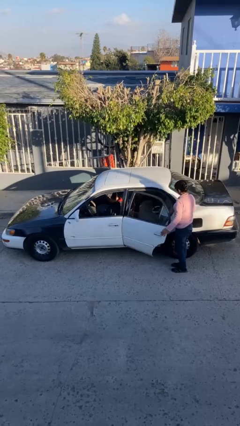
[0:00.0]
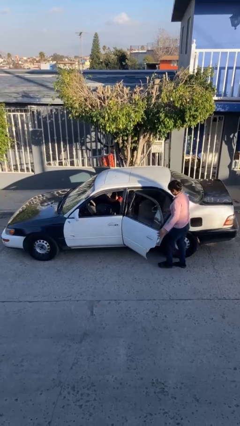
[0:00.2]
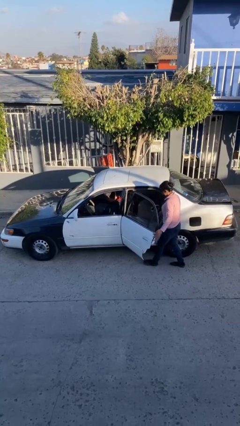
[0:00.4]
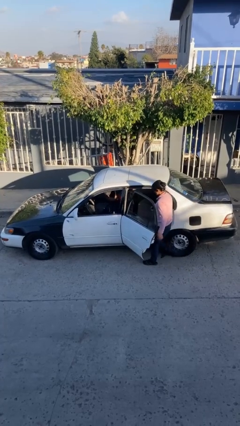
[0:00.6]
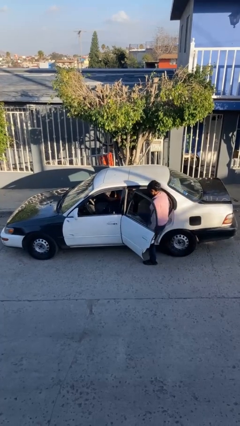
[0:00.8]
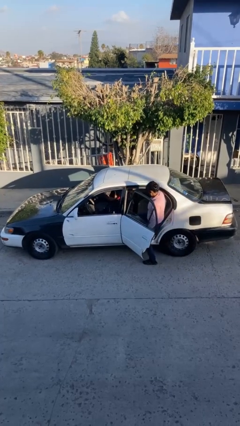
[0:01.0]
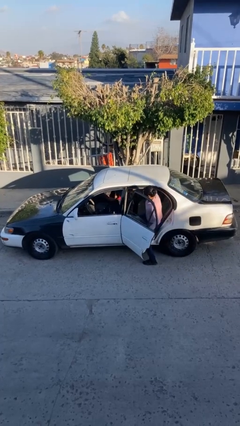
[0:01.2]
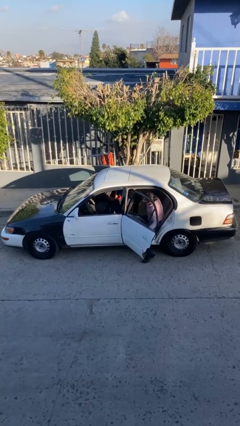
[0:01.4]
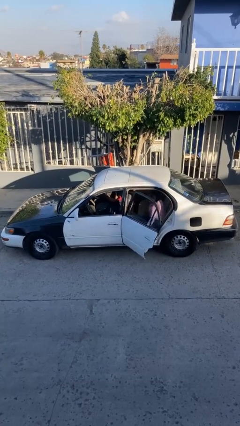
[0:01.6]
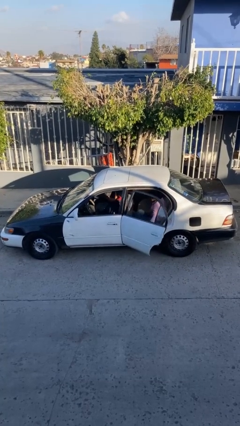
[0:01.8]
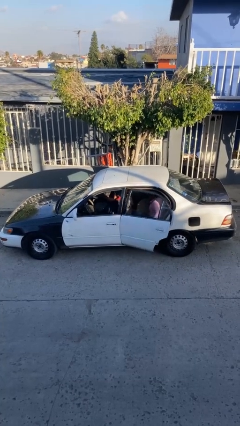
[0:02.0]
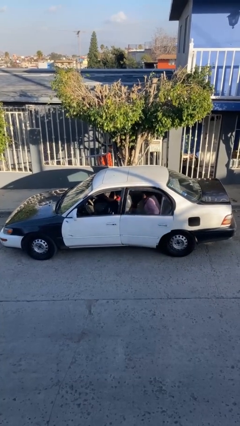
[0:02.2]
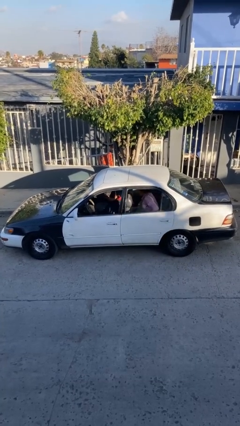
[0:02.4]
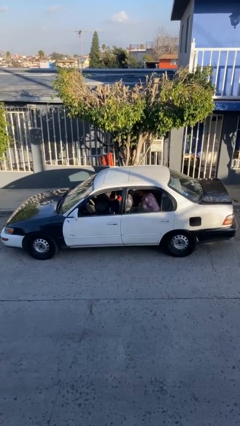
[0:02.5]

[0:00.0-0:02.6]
car picks up person

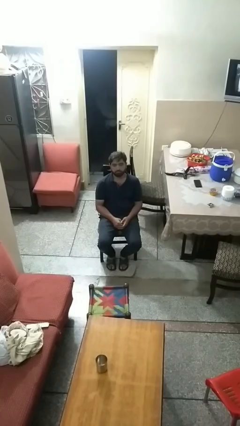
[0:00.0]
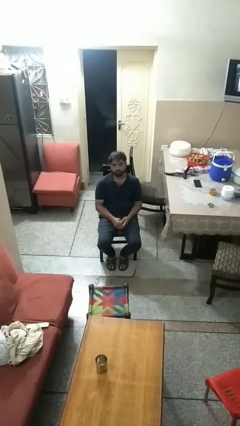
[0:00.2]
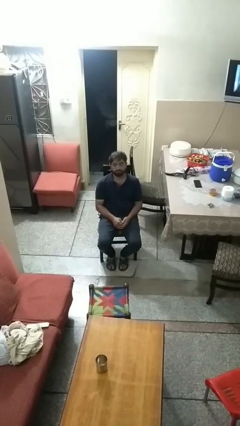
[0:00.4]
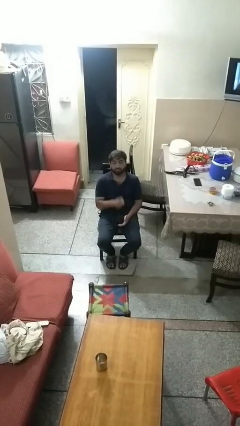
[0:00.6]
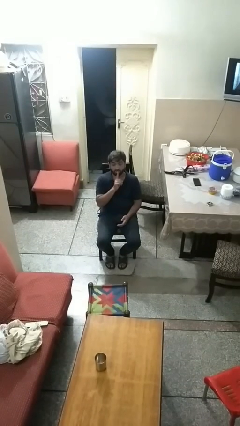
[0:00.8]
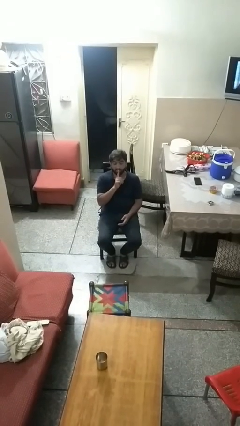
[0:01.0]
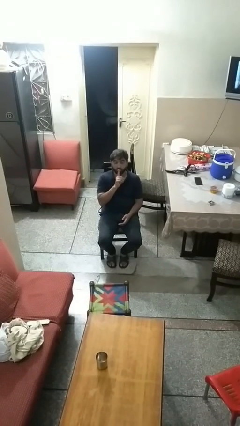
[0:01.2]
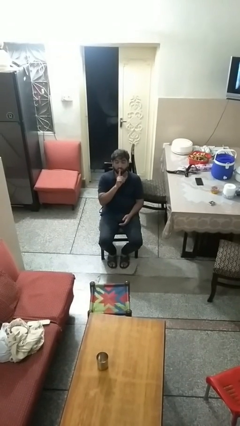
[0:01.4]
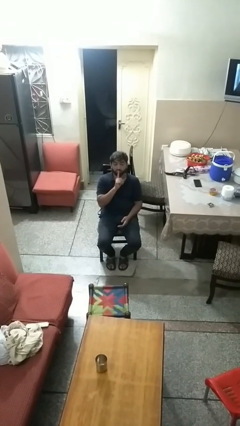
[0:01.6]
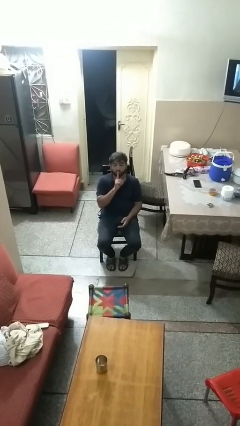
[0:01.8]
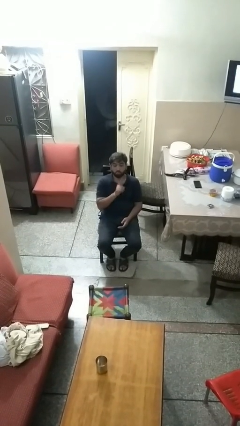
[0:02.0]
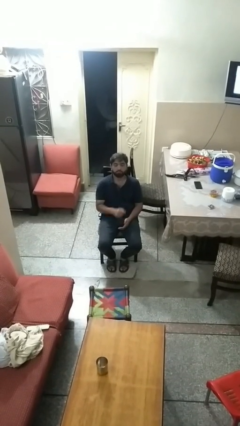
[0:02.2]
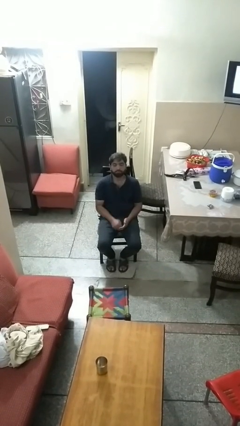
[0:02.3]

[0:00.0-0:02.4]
person gestures be quiet

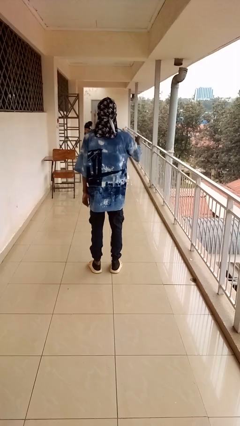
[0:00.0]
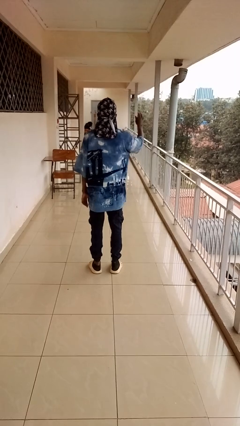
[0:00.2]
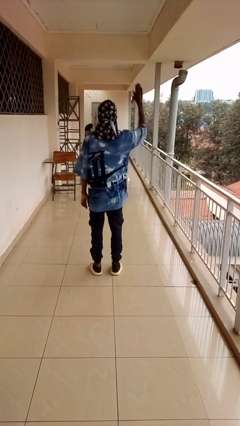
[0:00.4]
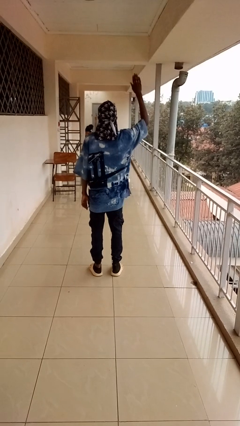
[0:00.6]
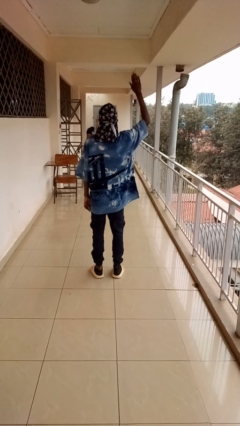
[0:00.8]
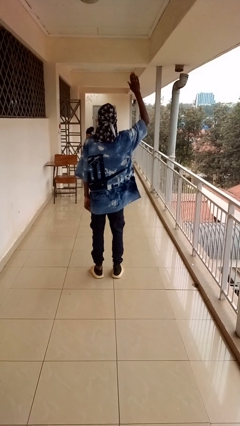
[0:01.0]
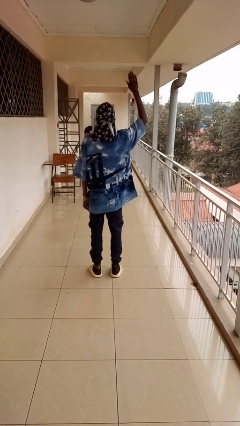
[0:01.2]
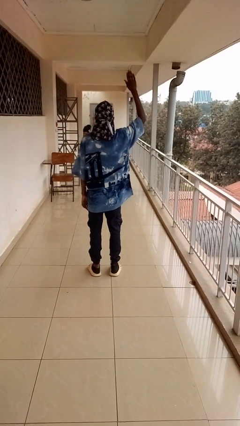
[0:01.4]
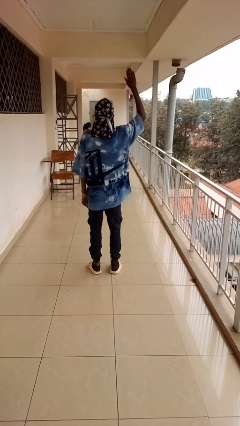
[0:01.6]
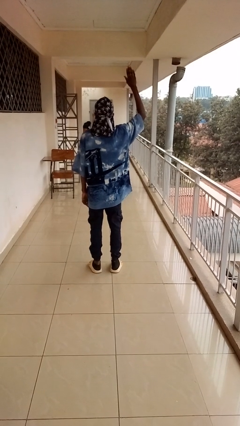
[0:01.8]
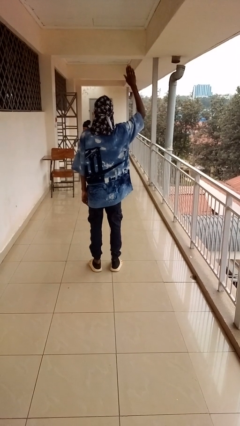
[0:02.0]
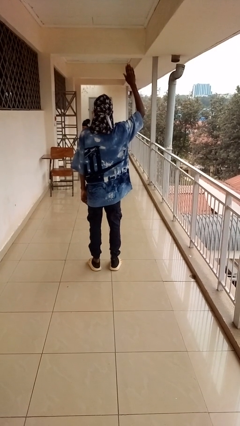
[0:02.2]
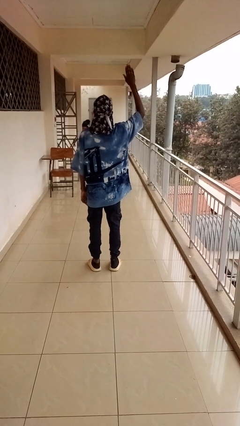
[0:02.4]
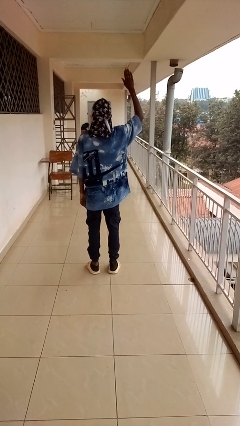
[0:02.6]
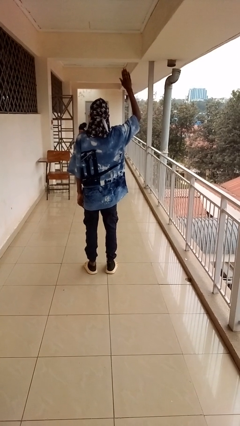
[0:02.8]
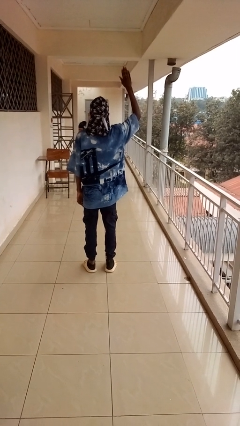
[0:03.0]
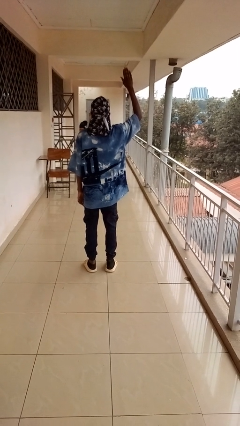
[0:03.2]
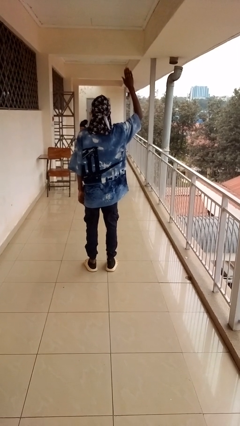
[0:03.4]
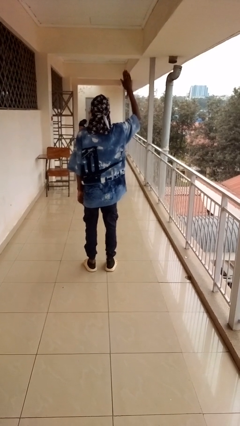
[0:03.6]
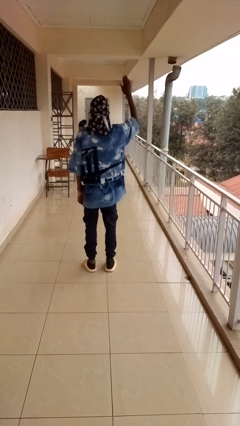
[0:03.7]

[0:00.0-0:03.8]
person gestures raise hand

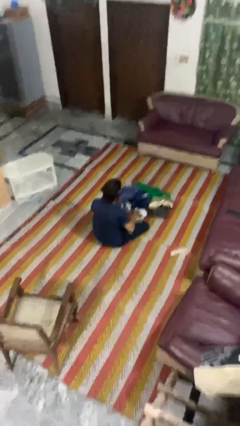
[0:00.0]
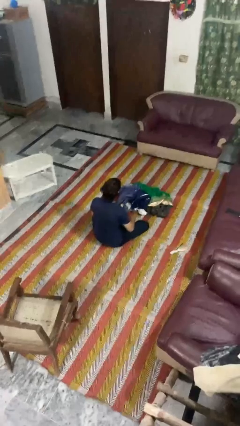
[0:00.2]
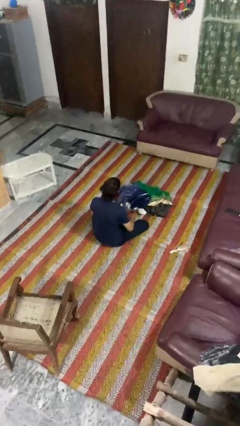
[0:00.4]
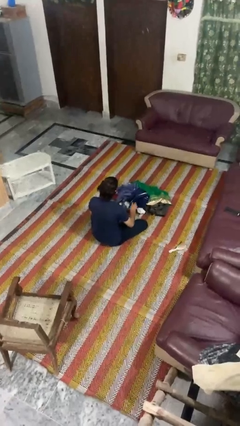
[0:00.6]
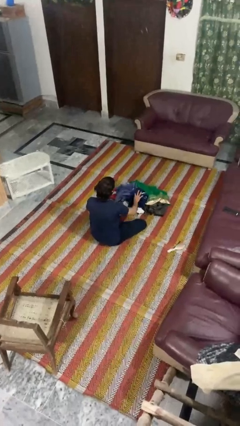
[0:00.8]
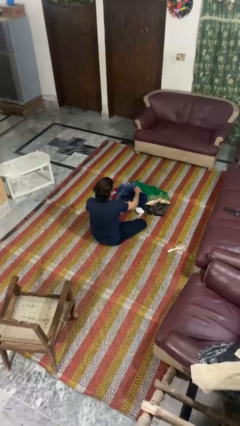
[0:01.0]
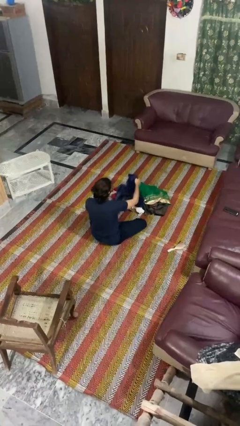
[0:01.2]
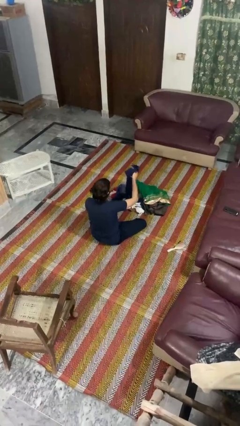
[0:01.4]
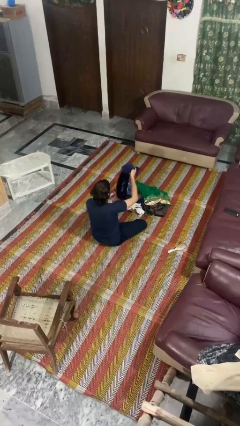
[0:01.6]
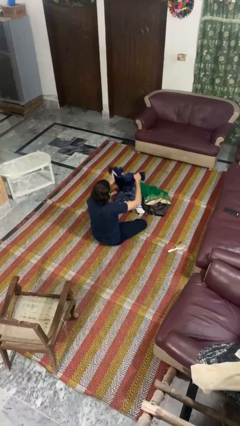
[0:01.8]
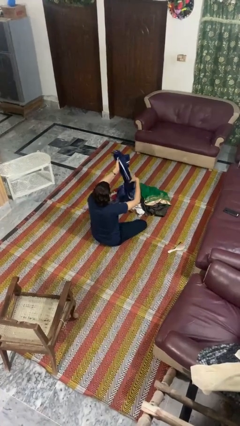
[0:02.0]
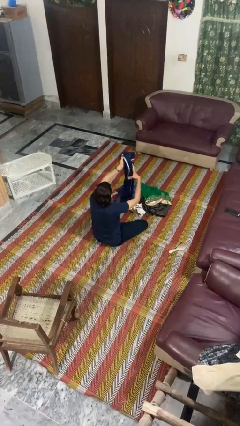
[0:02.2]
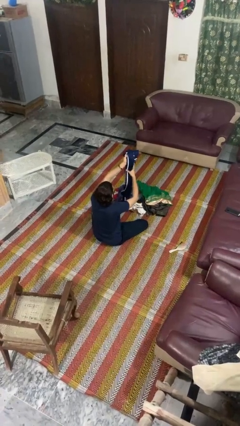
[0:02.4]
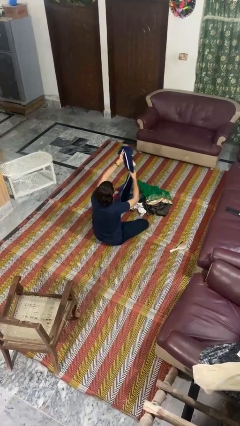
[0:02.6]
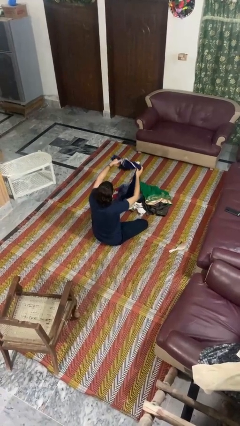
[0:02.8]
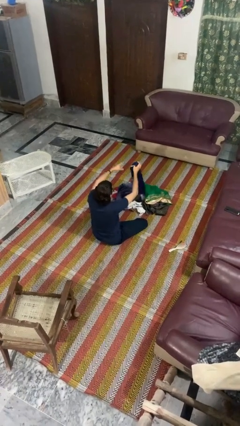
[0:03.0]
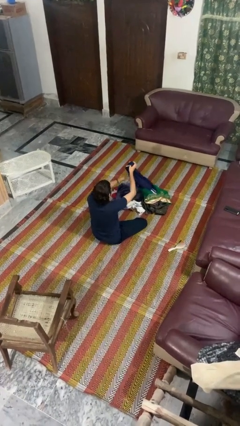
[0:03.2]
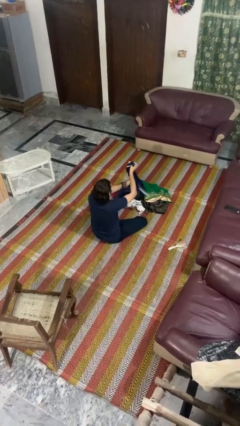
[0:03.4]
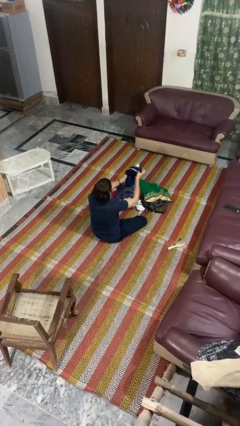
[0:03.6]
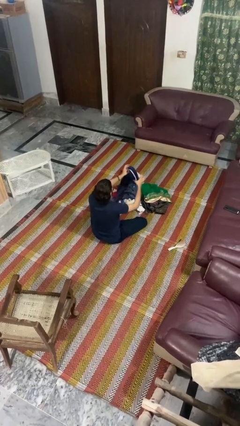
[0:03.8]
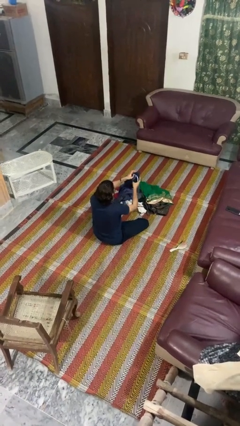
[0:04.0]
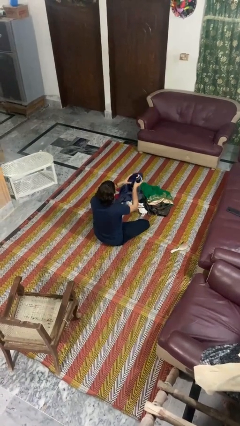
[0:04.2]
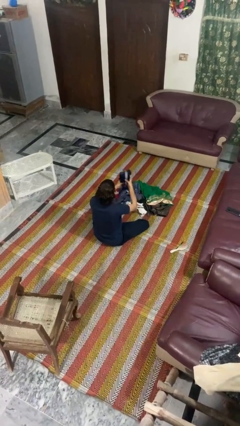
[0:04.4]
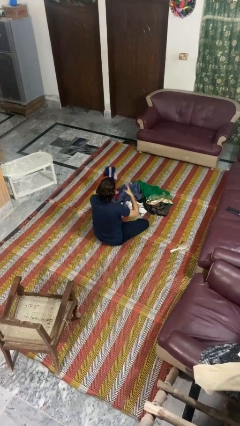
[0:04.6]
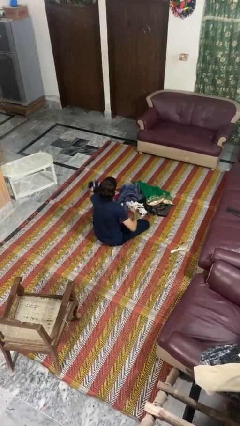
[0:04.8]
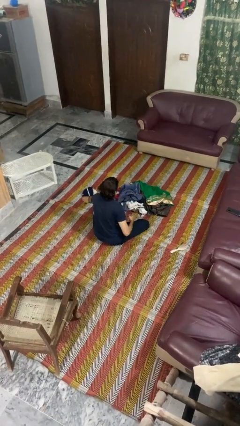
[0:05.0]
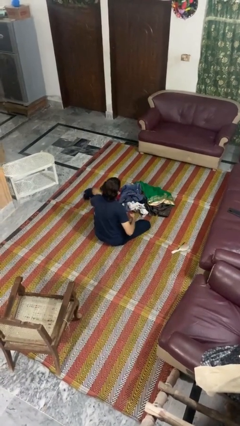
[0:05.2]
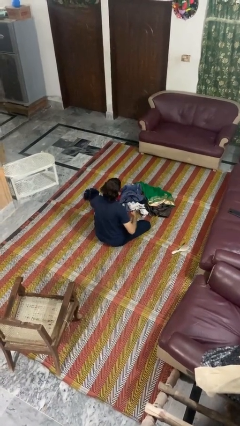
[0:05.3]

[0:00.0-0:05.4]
person folds pants

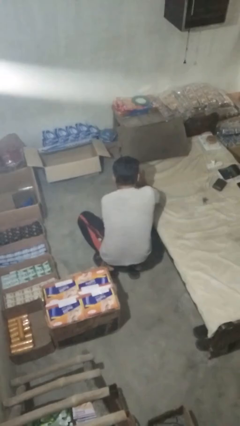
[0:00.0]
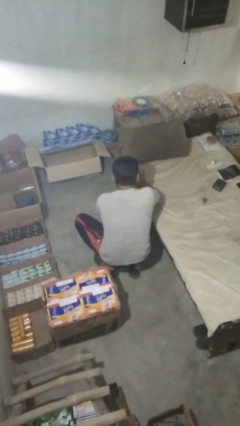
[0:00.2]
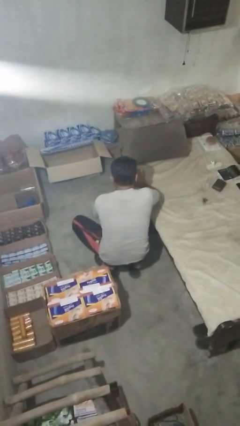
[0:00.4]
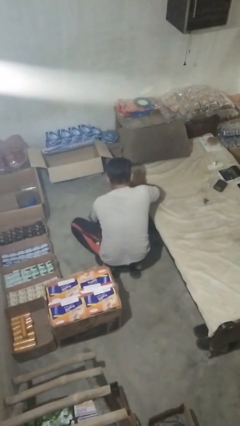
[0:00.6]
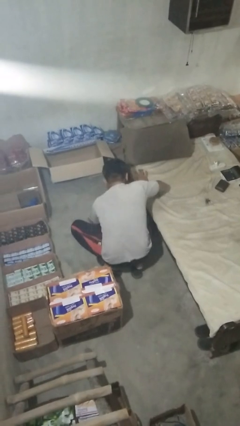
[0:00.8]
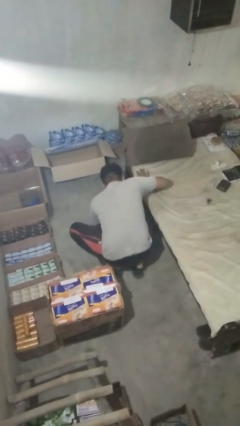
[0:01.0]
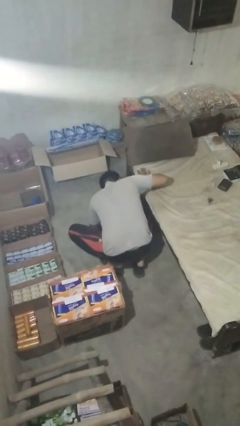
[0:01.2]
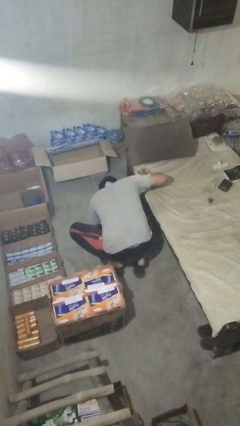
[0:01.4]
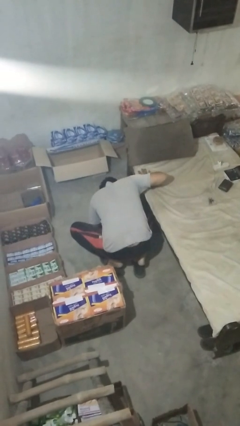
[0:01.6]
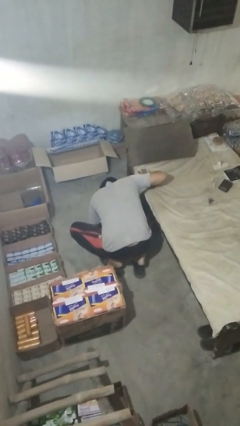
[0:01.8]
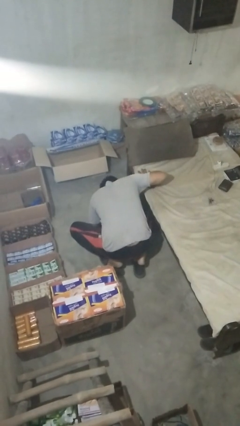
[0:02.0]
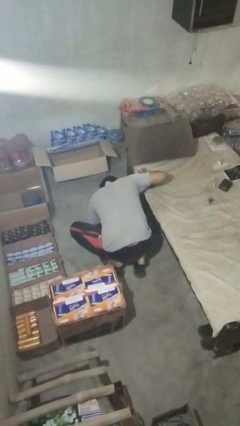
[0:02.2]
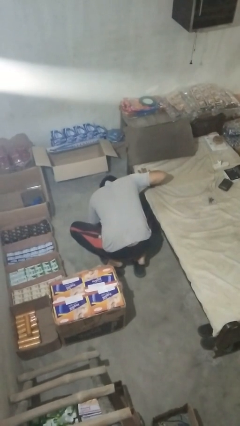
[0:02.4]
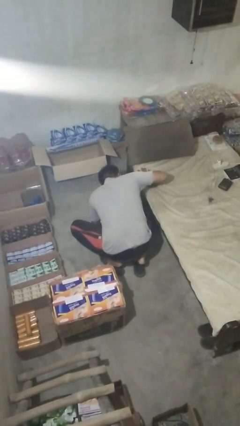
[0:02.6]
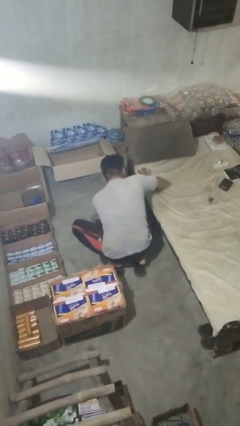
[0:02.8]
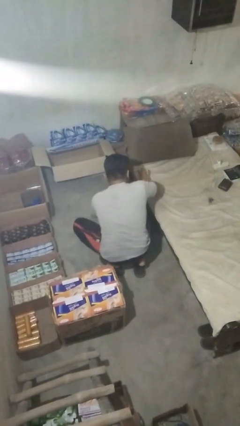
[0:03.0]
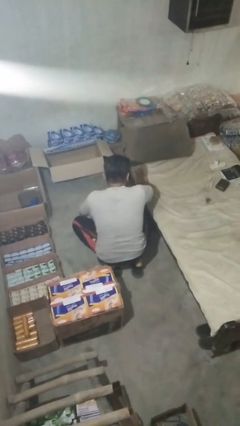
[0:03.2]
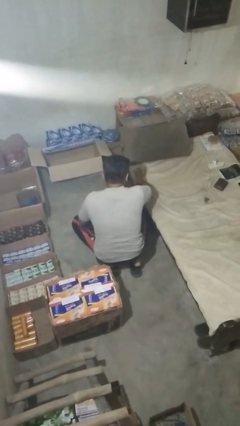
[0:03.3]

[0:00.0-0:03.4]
person searches under bed
